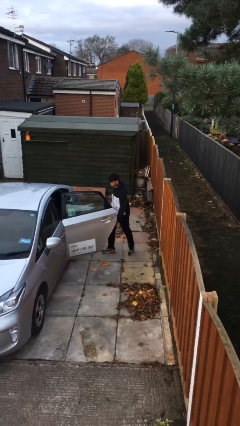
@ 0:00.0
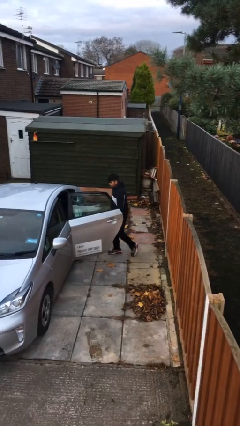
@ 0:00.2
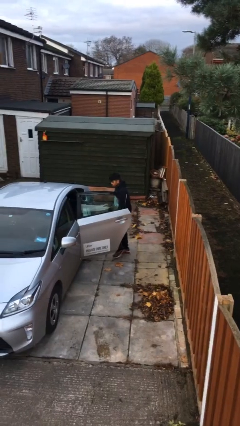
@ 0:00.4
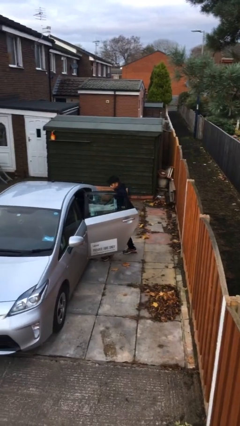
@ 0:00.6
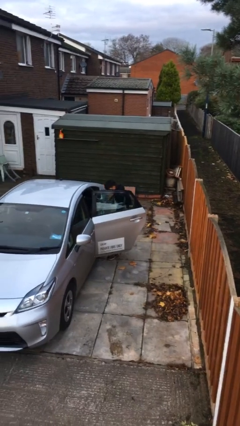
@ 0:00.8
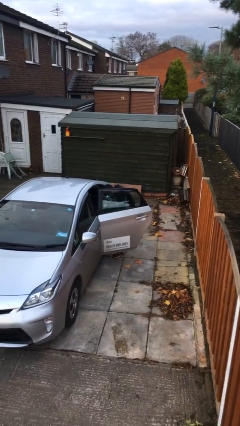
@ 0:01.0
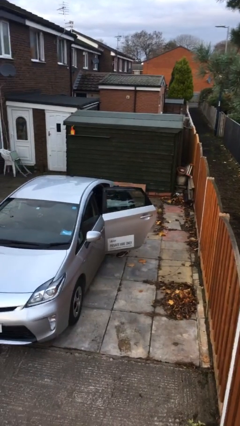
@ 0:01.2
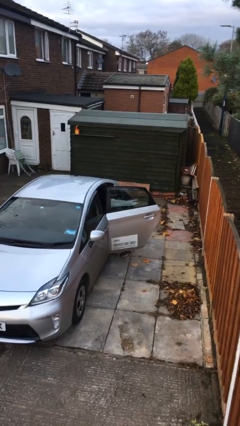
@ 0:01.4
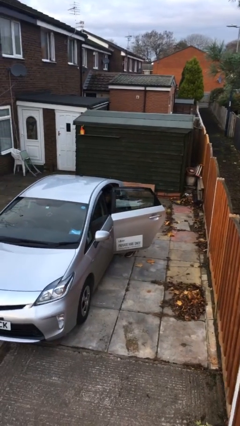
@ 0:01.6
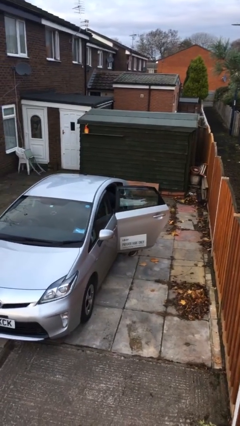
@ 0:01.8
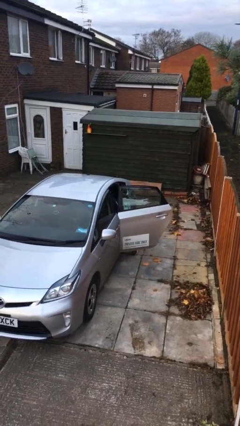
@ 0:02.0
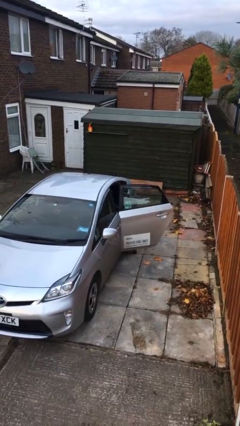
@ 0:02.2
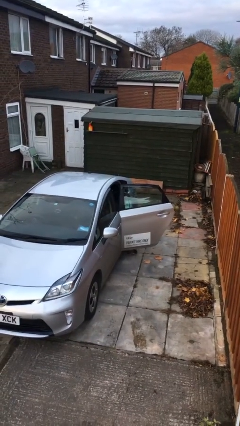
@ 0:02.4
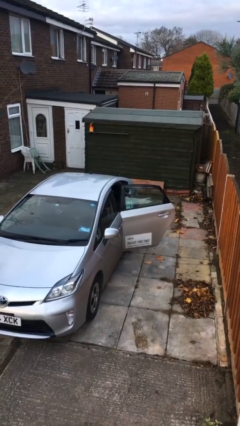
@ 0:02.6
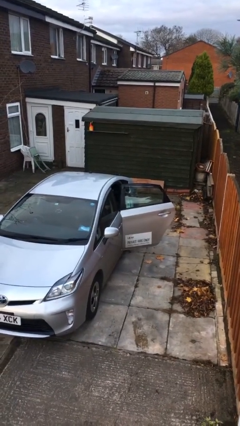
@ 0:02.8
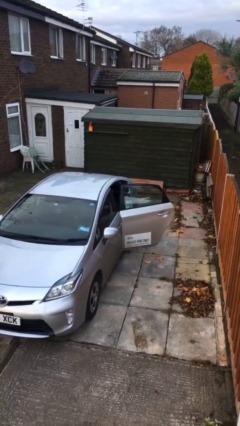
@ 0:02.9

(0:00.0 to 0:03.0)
person enters car

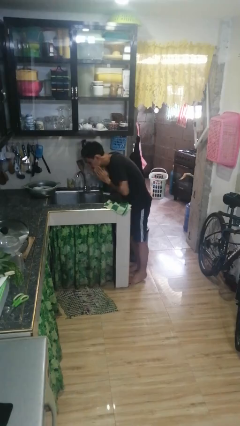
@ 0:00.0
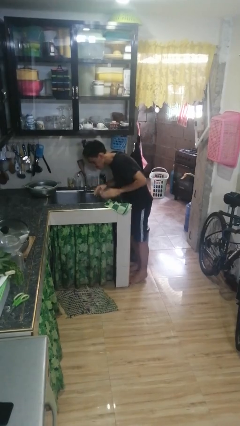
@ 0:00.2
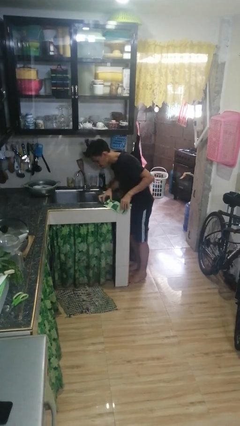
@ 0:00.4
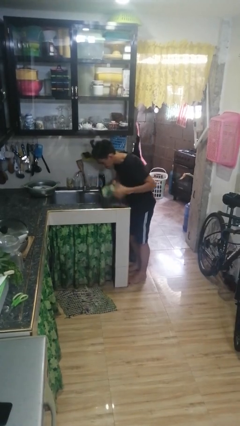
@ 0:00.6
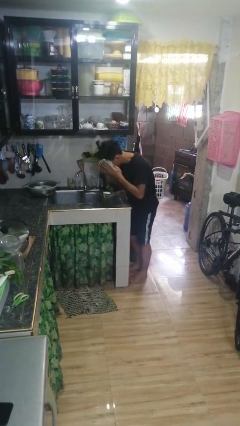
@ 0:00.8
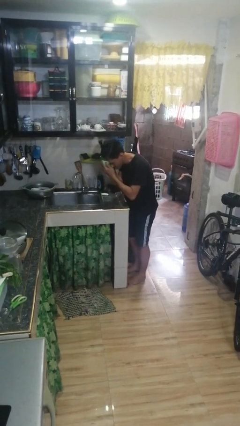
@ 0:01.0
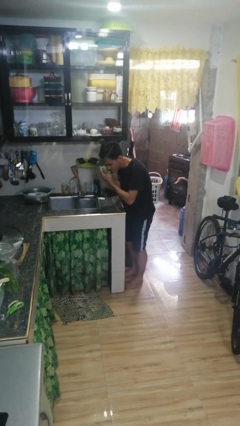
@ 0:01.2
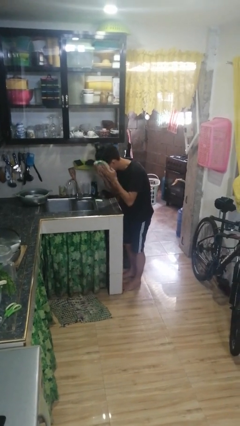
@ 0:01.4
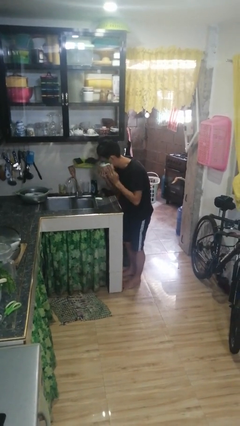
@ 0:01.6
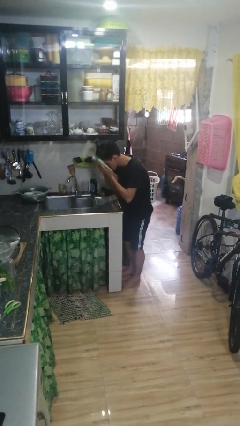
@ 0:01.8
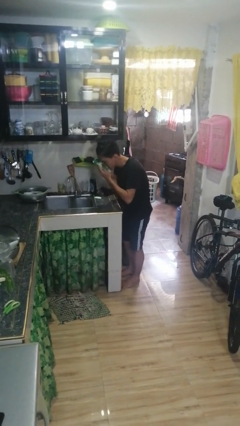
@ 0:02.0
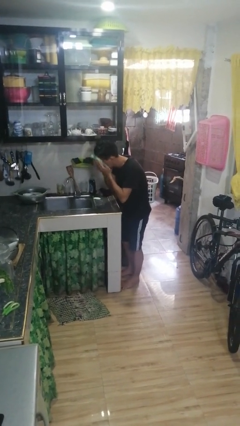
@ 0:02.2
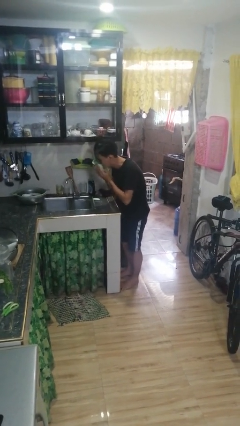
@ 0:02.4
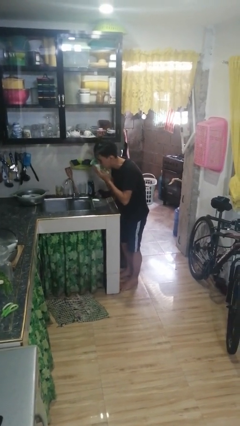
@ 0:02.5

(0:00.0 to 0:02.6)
person dries face with towel

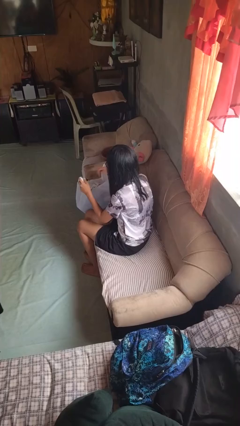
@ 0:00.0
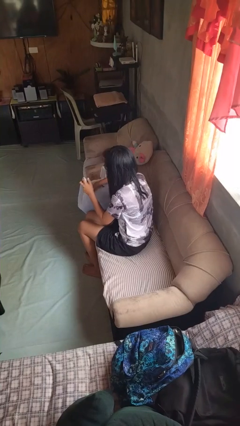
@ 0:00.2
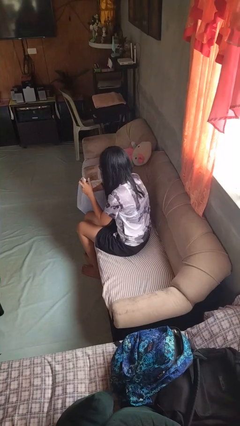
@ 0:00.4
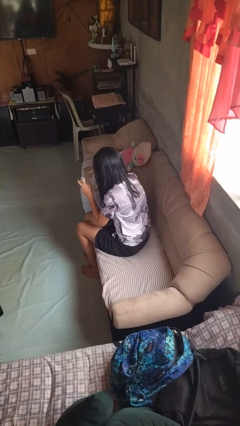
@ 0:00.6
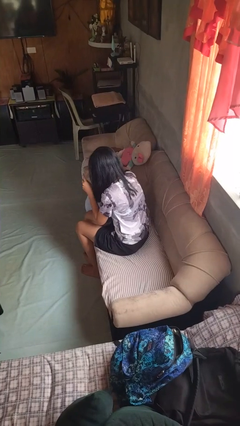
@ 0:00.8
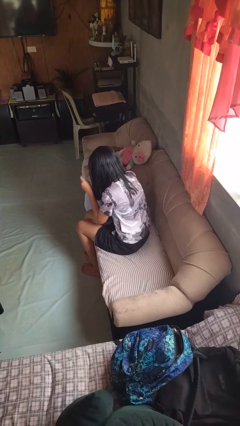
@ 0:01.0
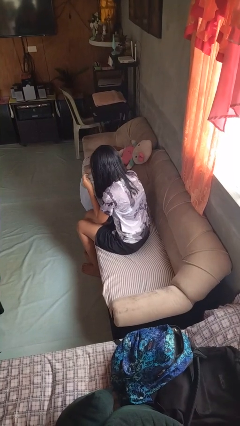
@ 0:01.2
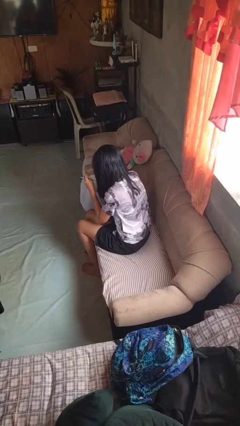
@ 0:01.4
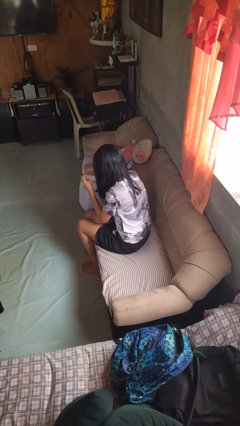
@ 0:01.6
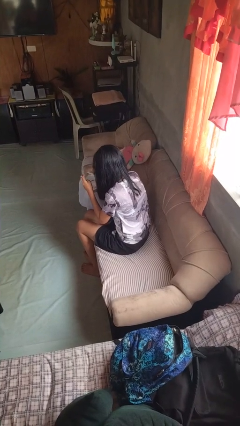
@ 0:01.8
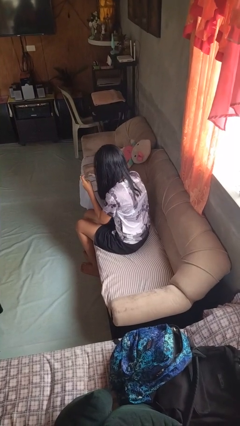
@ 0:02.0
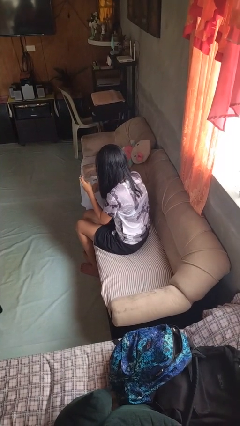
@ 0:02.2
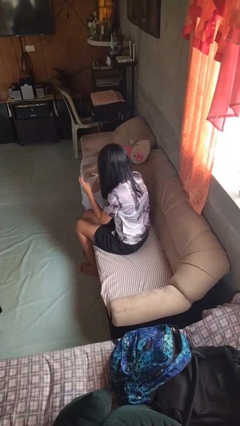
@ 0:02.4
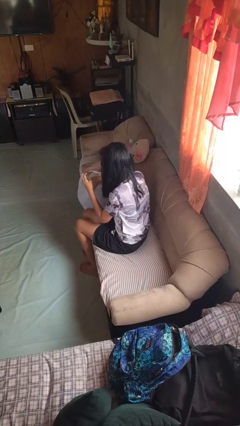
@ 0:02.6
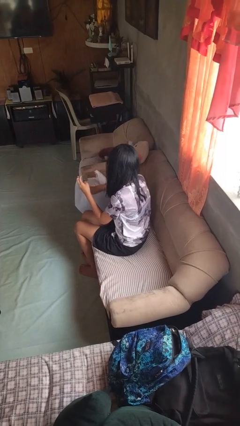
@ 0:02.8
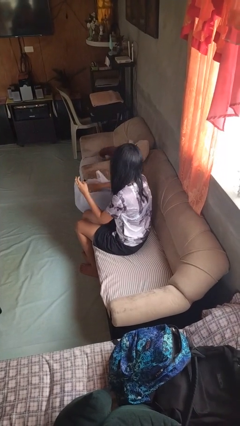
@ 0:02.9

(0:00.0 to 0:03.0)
person searches in bag

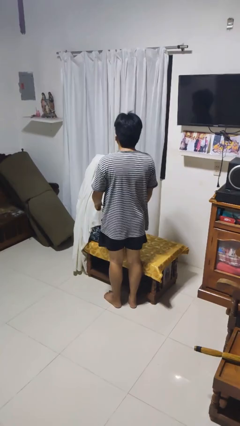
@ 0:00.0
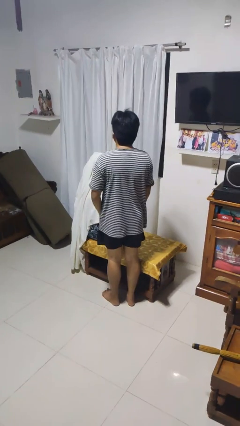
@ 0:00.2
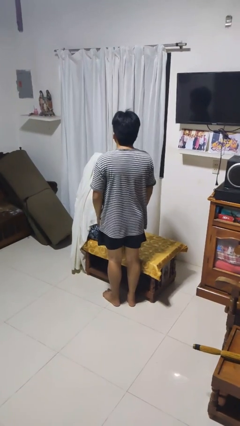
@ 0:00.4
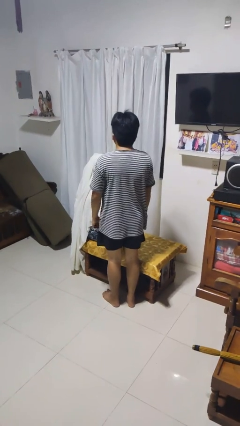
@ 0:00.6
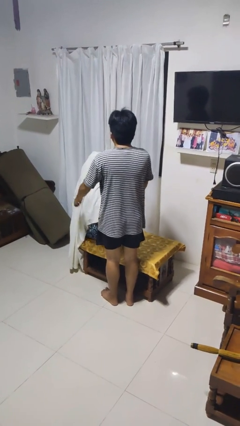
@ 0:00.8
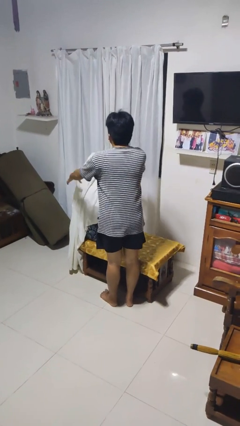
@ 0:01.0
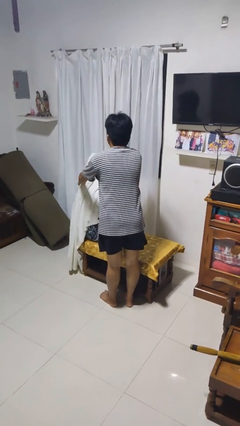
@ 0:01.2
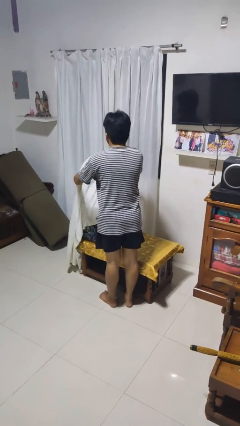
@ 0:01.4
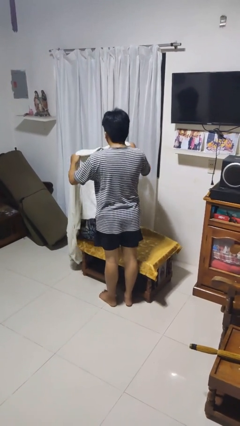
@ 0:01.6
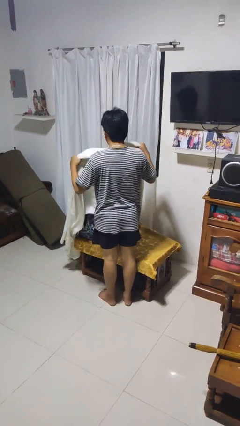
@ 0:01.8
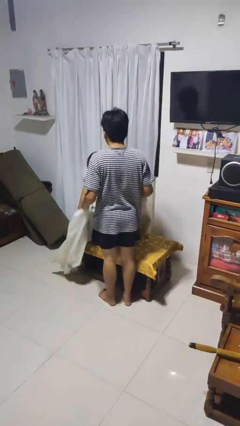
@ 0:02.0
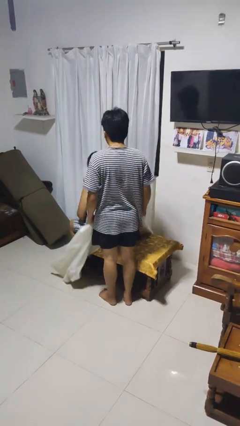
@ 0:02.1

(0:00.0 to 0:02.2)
person uncovers friend with blanket

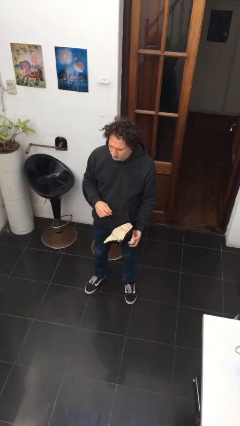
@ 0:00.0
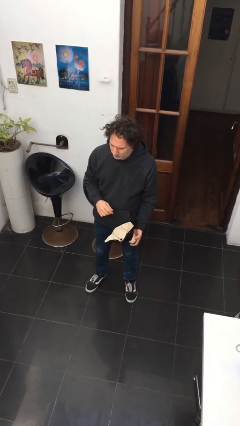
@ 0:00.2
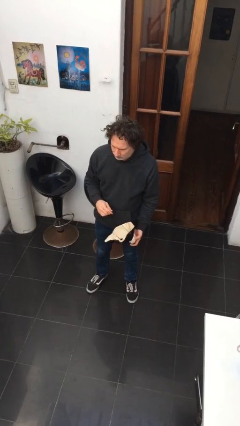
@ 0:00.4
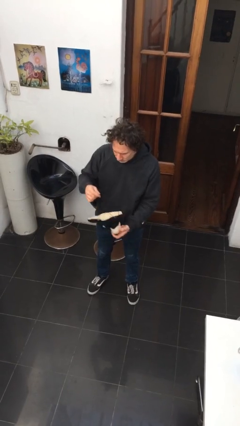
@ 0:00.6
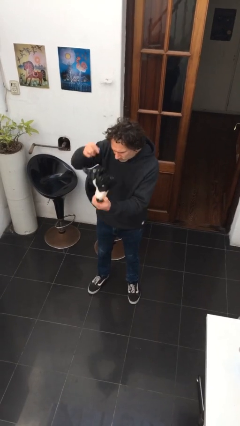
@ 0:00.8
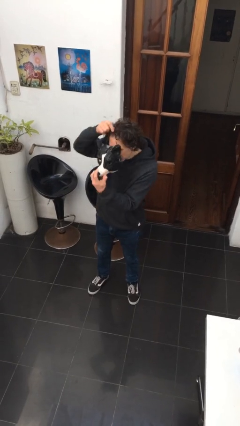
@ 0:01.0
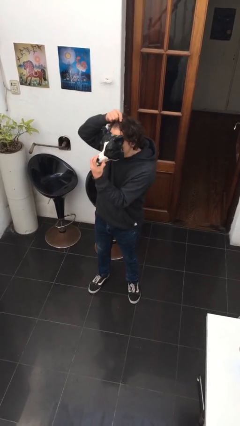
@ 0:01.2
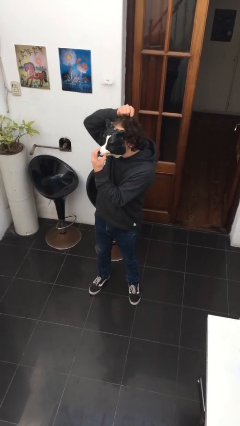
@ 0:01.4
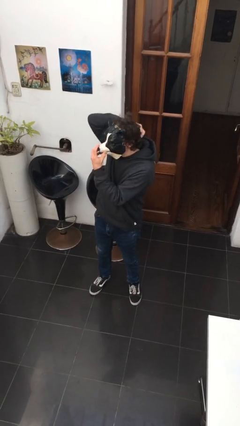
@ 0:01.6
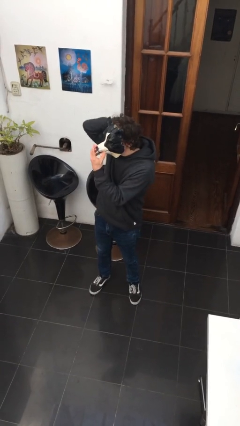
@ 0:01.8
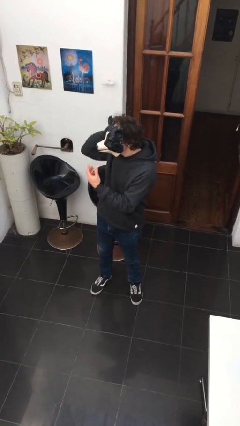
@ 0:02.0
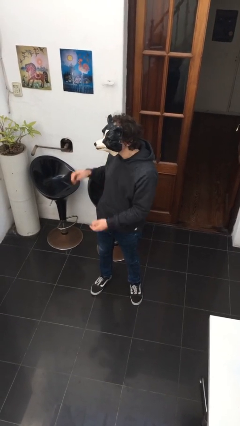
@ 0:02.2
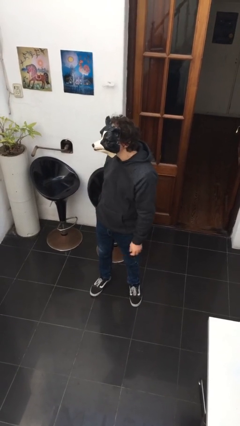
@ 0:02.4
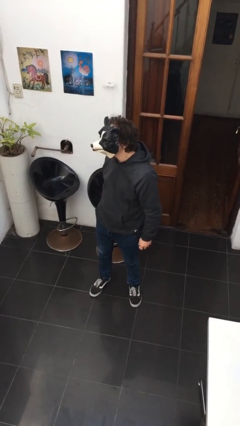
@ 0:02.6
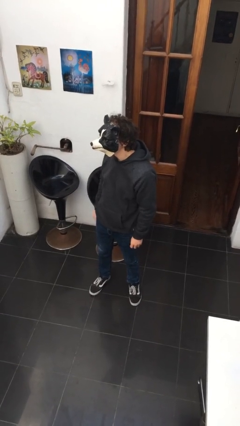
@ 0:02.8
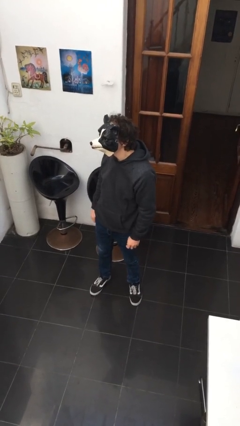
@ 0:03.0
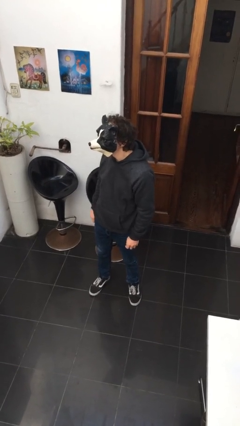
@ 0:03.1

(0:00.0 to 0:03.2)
person puts on facemask

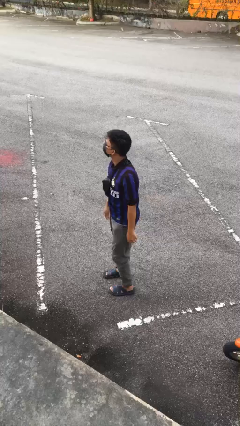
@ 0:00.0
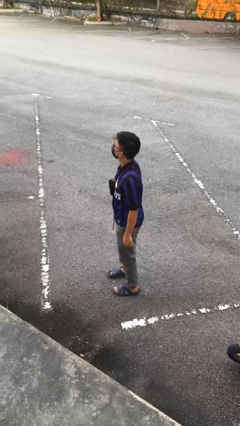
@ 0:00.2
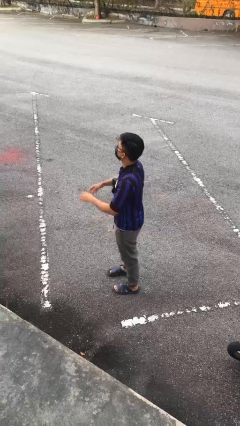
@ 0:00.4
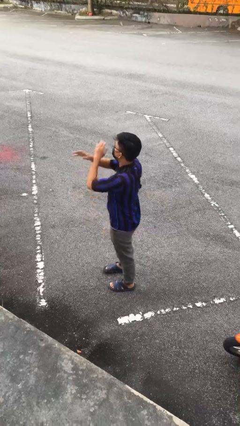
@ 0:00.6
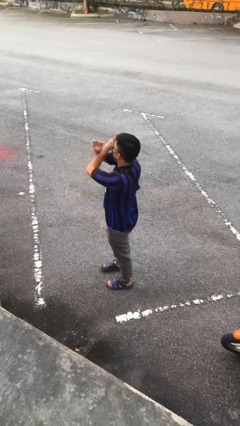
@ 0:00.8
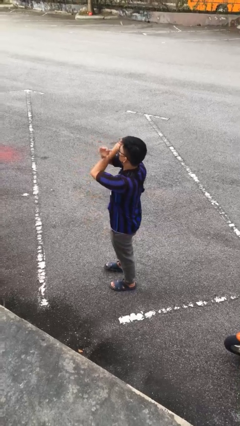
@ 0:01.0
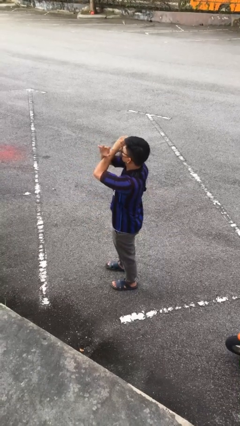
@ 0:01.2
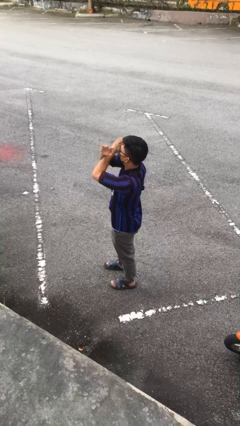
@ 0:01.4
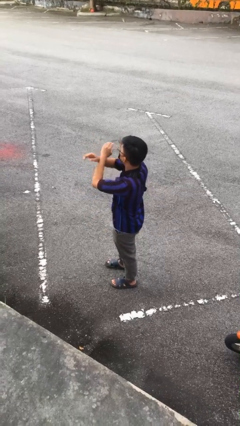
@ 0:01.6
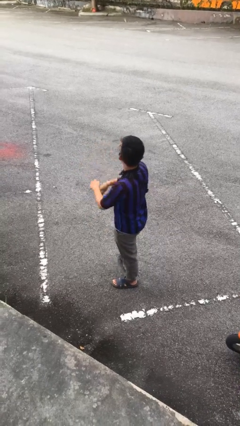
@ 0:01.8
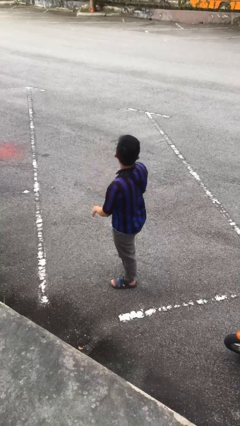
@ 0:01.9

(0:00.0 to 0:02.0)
person gestures arms x

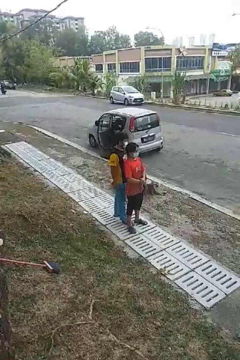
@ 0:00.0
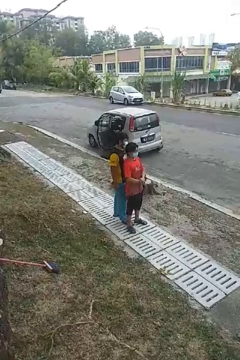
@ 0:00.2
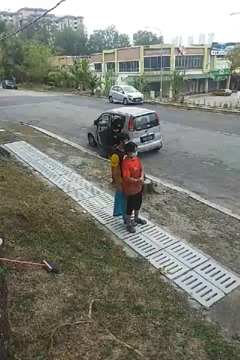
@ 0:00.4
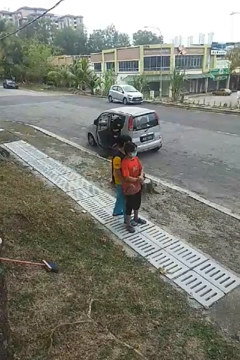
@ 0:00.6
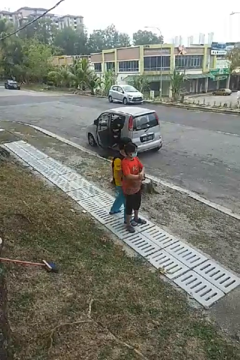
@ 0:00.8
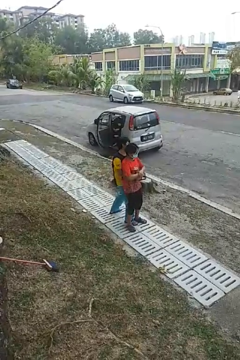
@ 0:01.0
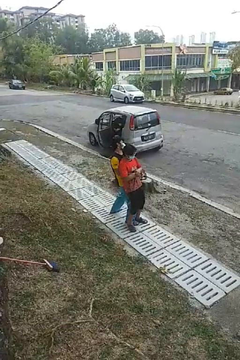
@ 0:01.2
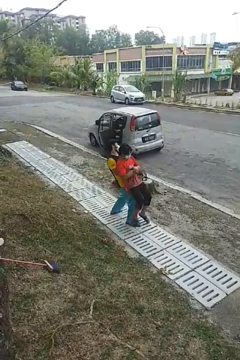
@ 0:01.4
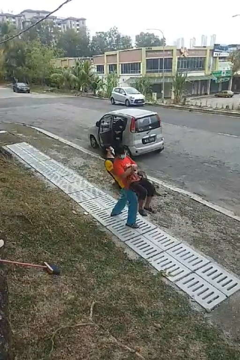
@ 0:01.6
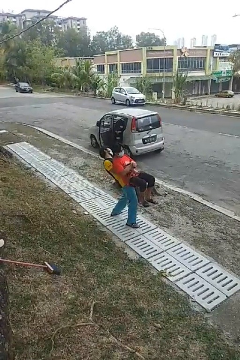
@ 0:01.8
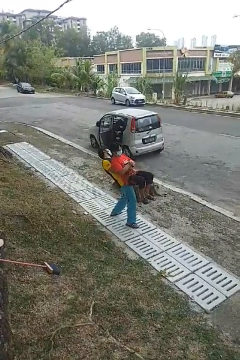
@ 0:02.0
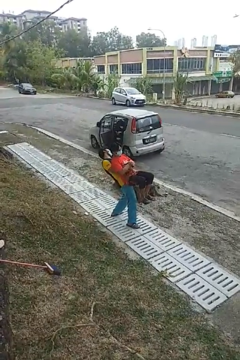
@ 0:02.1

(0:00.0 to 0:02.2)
person picks up person
